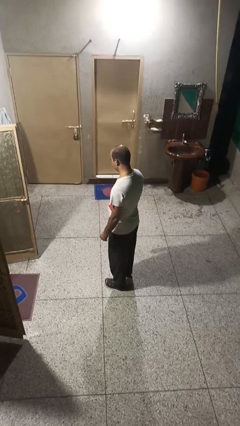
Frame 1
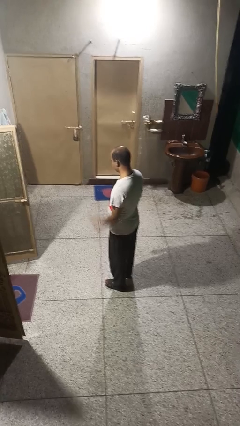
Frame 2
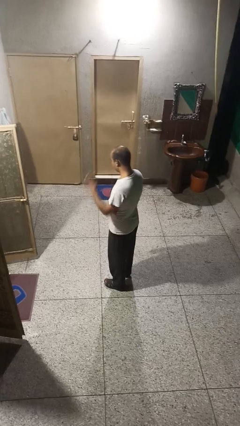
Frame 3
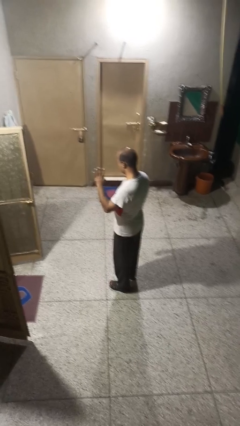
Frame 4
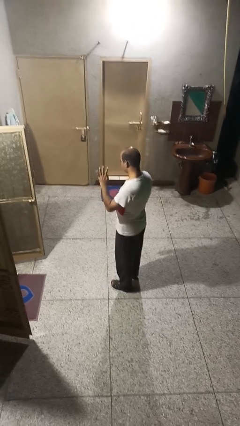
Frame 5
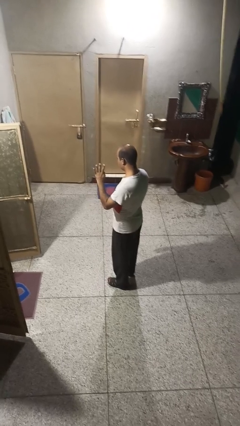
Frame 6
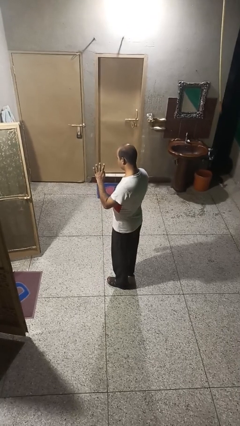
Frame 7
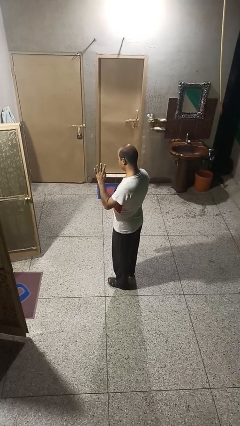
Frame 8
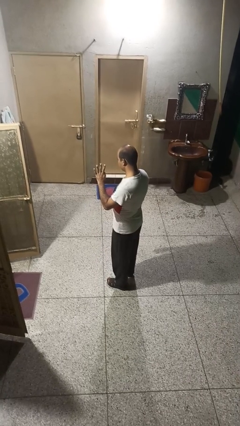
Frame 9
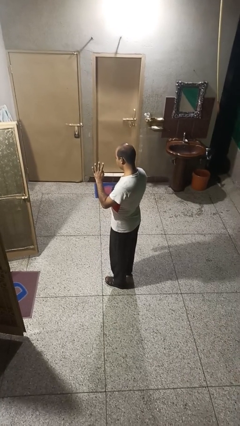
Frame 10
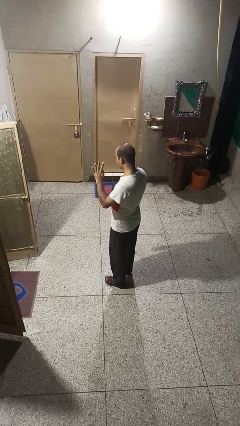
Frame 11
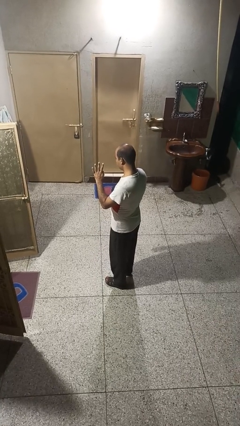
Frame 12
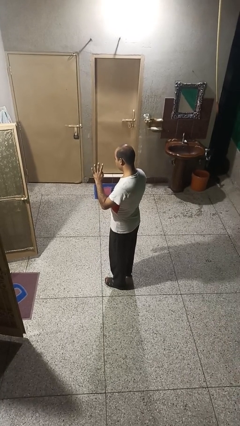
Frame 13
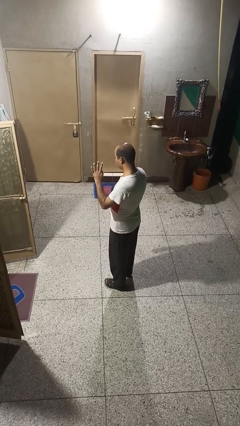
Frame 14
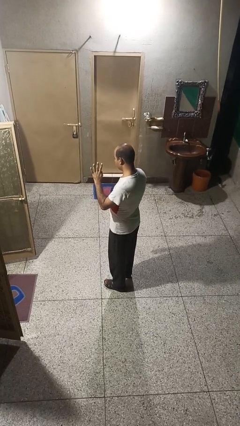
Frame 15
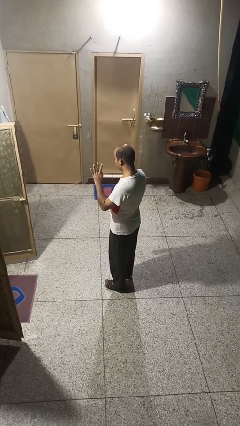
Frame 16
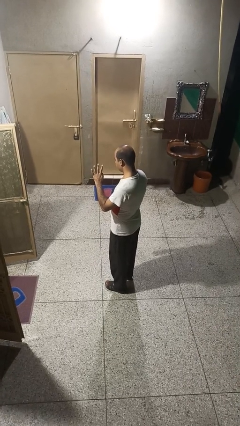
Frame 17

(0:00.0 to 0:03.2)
person gestures number four

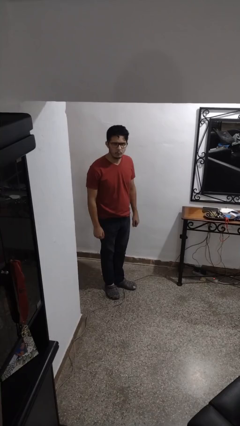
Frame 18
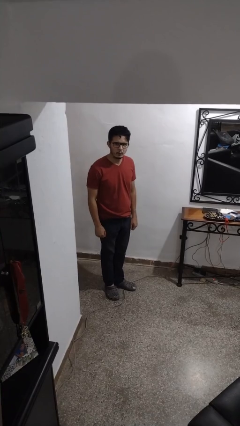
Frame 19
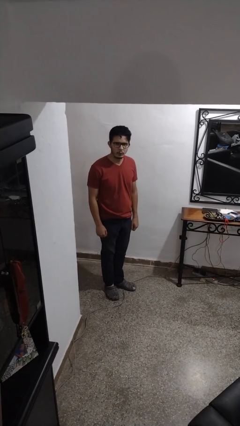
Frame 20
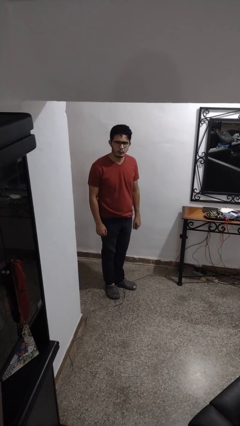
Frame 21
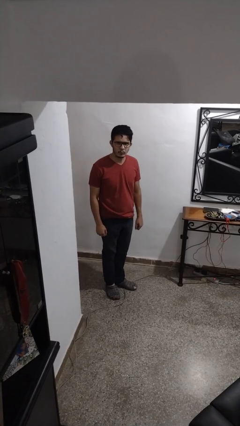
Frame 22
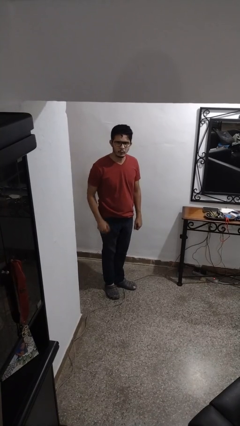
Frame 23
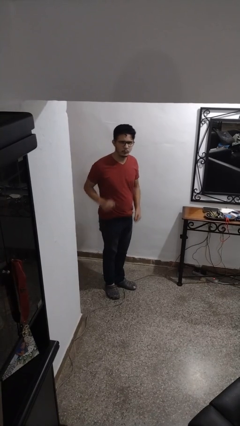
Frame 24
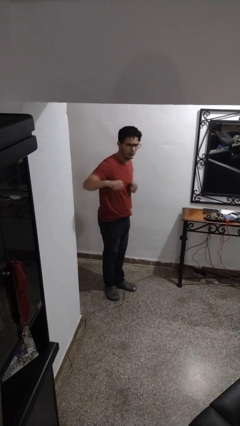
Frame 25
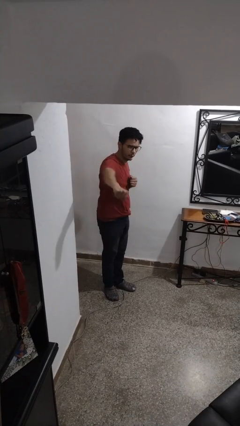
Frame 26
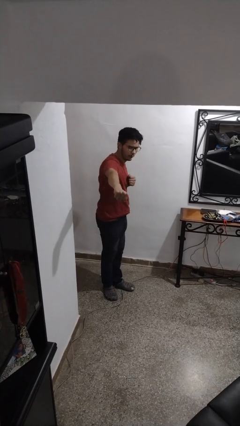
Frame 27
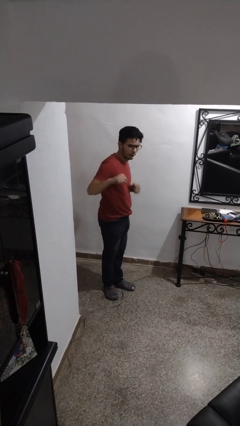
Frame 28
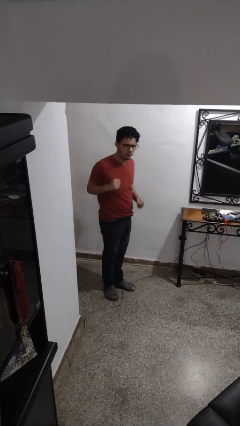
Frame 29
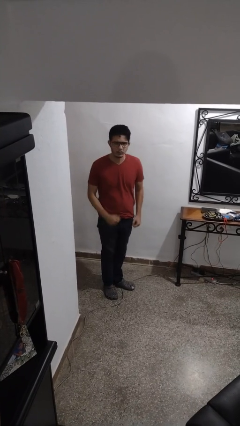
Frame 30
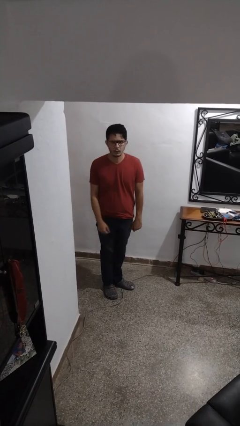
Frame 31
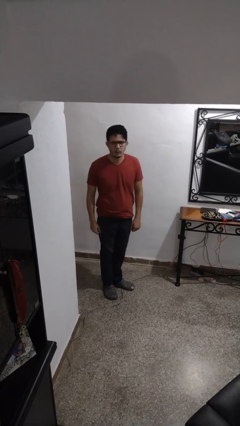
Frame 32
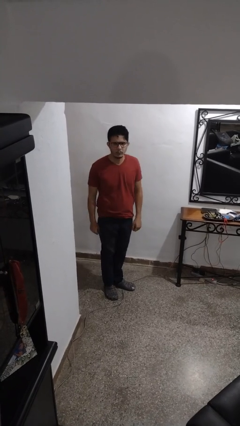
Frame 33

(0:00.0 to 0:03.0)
person karate chop

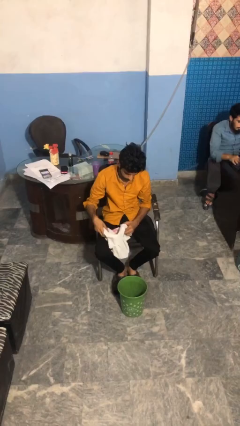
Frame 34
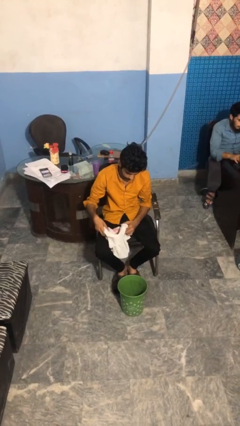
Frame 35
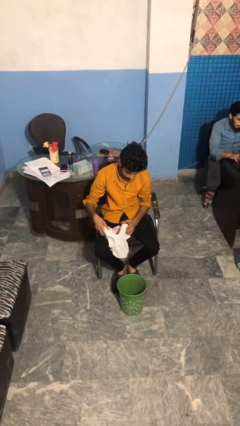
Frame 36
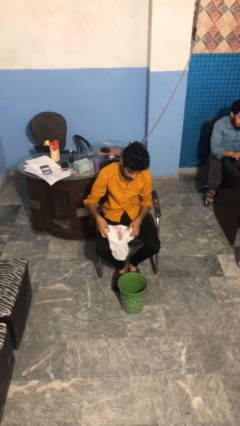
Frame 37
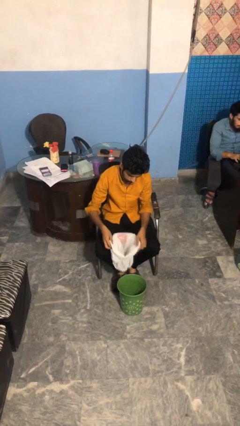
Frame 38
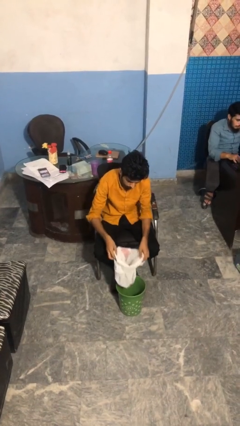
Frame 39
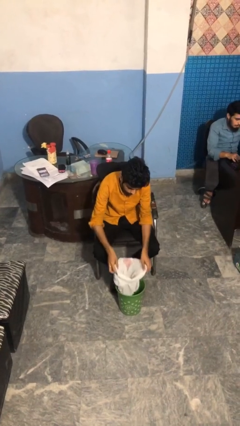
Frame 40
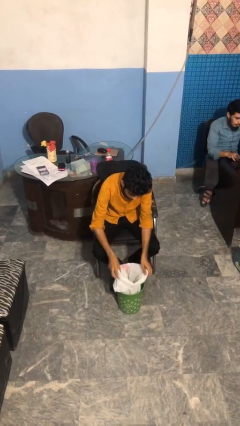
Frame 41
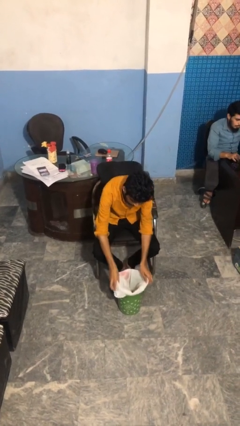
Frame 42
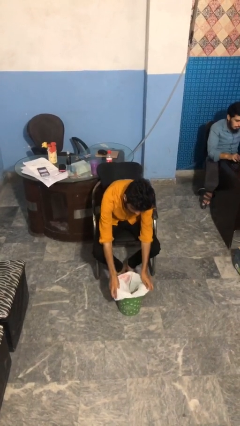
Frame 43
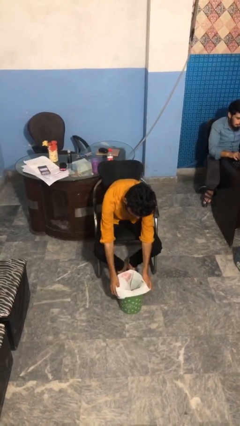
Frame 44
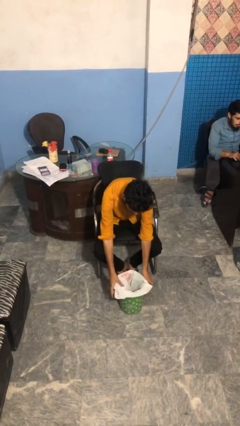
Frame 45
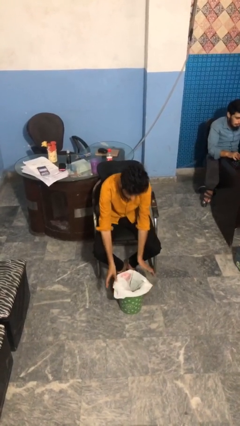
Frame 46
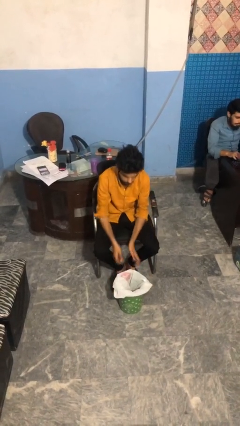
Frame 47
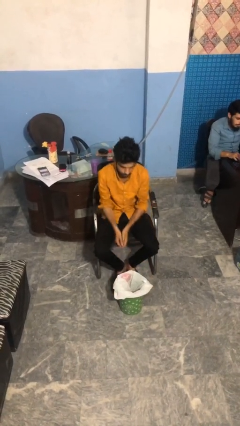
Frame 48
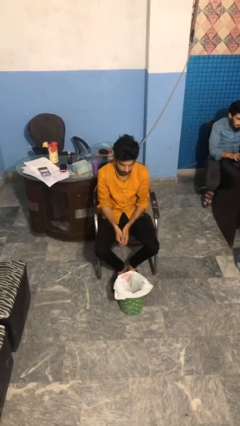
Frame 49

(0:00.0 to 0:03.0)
person inserts trashbag into trashcan

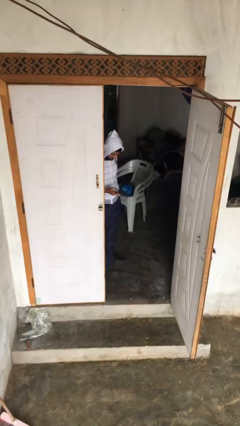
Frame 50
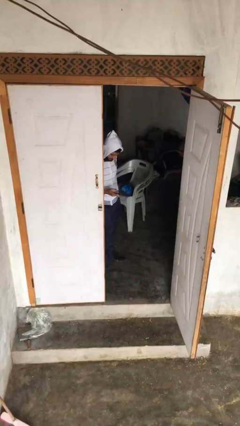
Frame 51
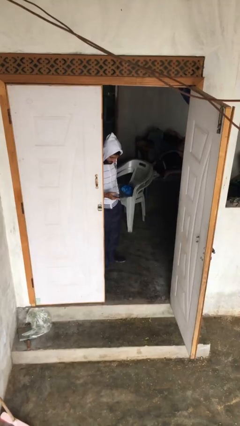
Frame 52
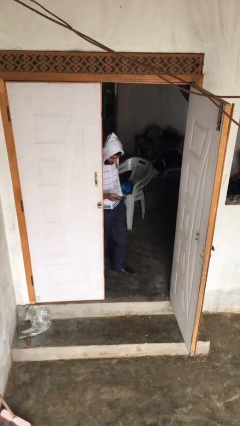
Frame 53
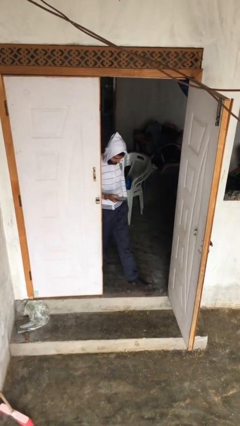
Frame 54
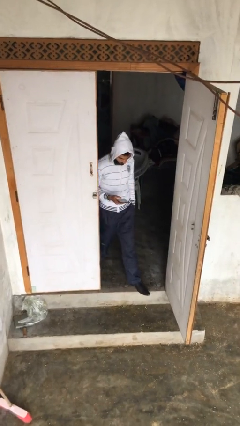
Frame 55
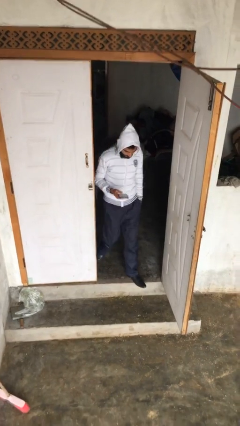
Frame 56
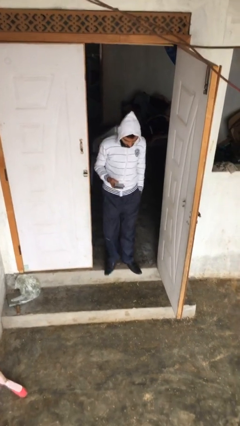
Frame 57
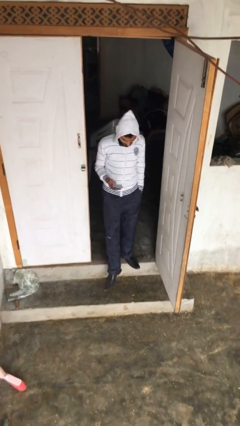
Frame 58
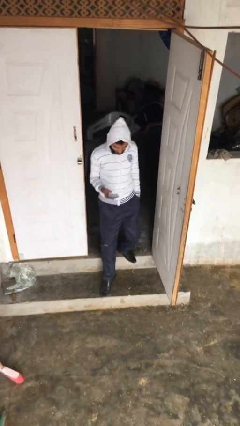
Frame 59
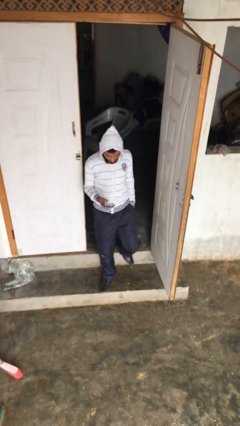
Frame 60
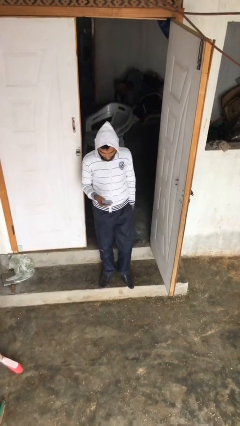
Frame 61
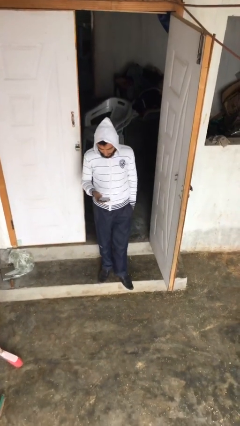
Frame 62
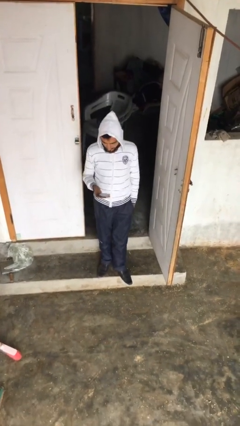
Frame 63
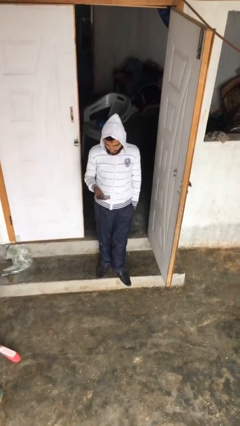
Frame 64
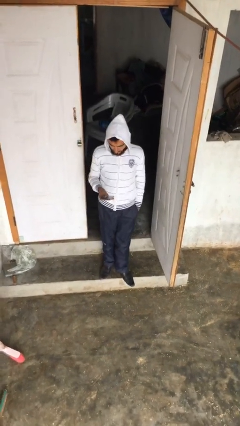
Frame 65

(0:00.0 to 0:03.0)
person enters scene through structure

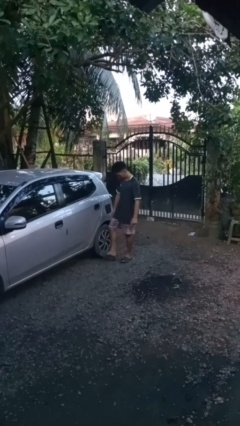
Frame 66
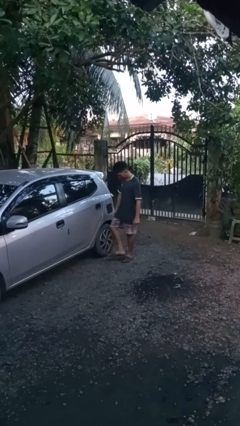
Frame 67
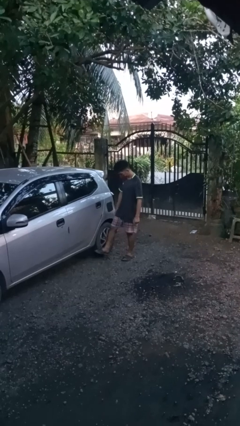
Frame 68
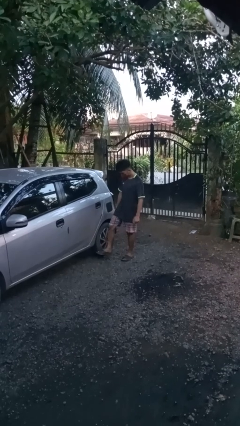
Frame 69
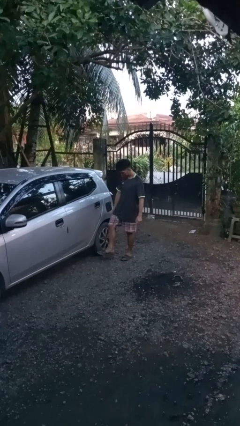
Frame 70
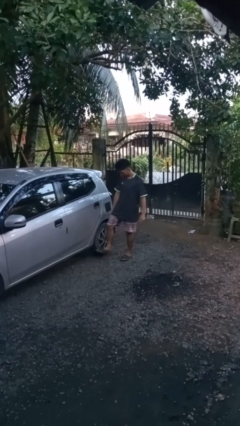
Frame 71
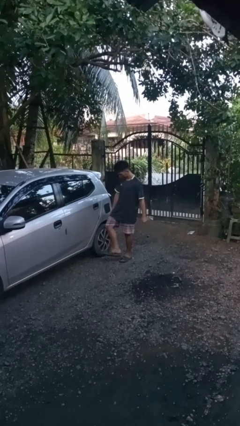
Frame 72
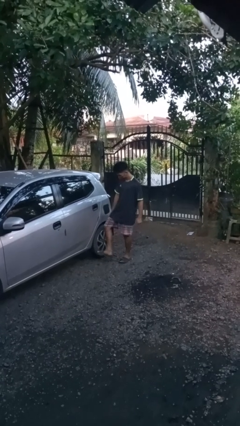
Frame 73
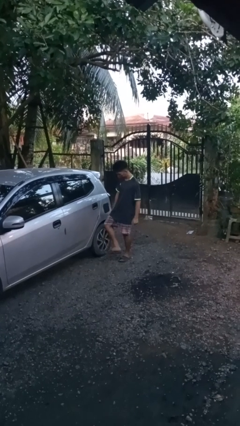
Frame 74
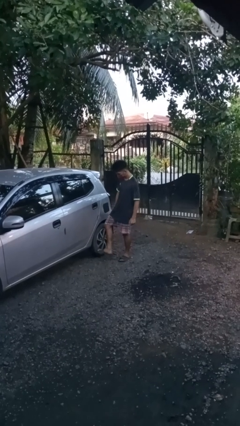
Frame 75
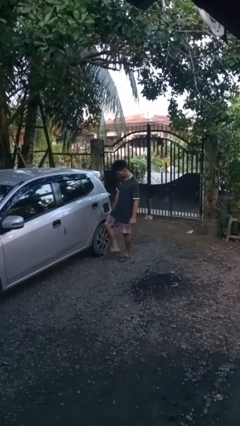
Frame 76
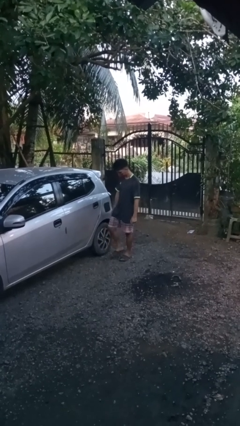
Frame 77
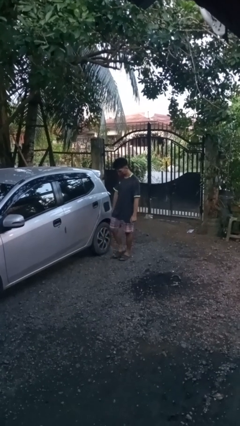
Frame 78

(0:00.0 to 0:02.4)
person kicks car tires

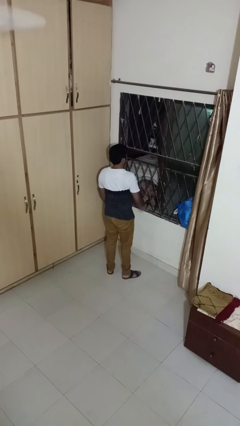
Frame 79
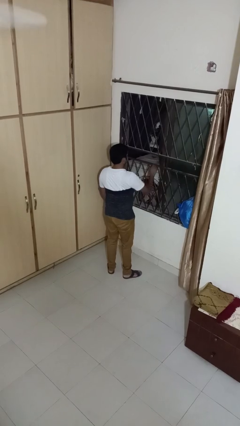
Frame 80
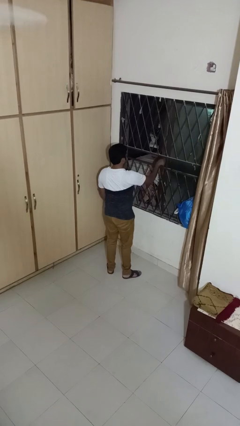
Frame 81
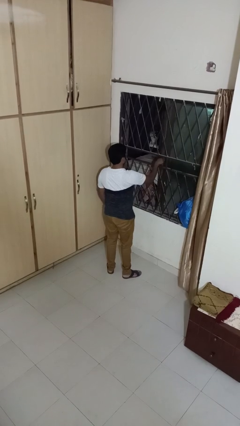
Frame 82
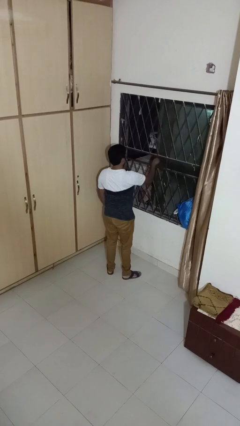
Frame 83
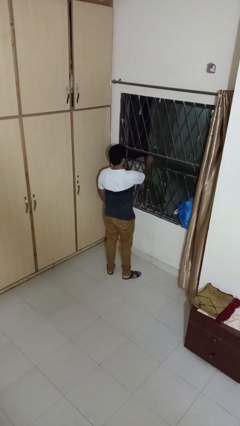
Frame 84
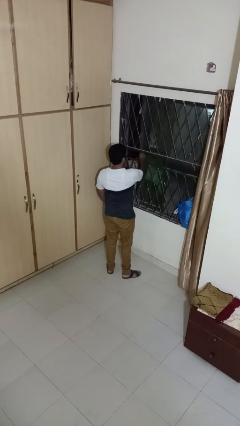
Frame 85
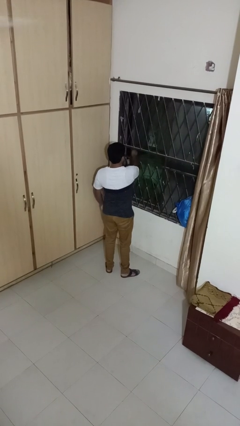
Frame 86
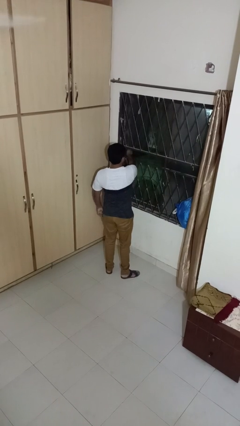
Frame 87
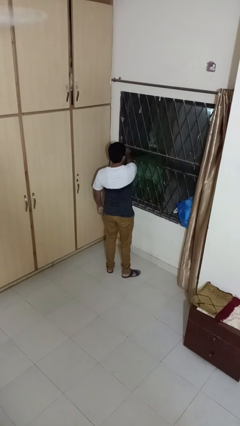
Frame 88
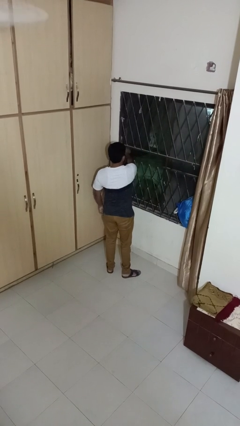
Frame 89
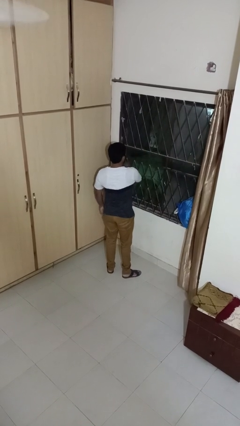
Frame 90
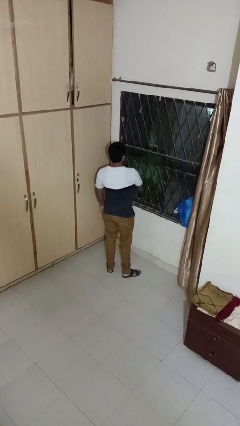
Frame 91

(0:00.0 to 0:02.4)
person closes home window

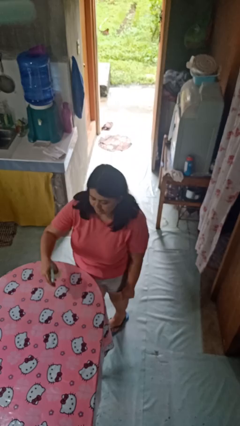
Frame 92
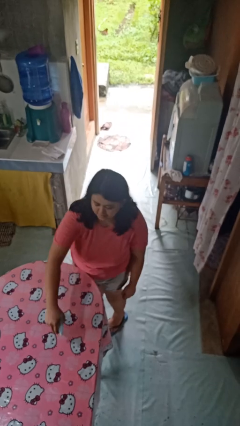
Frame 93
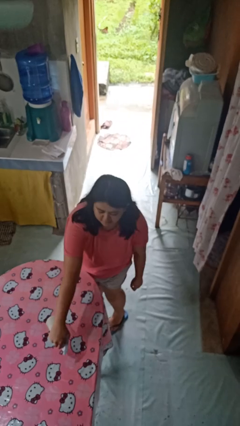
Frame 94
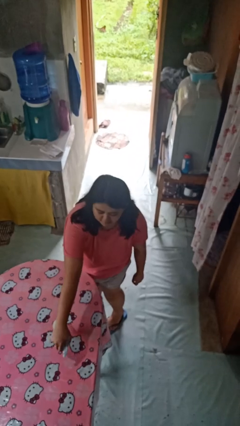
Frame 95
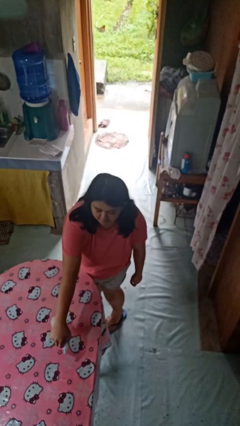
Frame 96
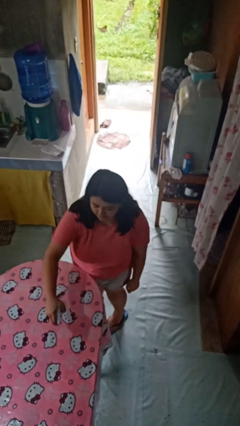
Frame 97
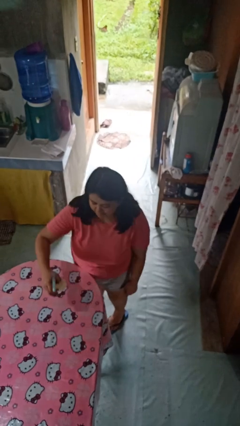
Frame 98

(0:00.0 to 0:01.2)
person sprays from bottle
